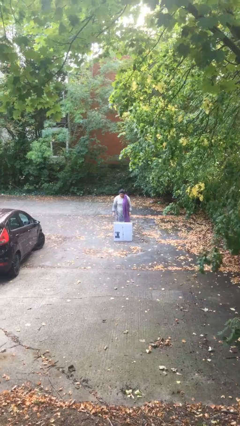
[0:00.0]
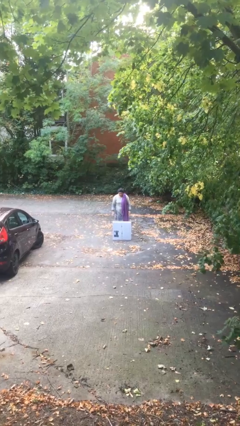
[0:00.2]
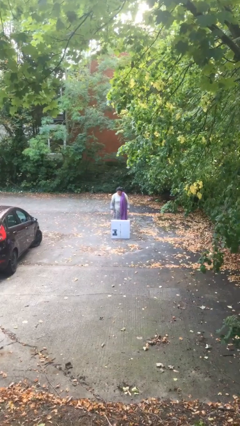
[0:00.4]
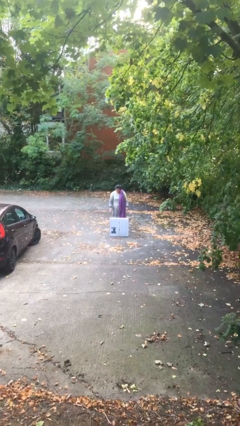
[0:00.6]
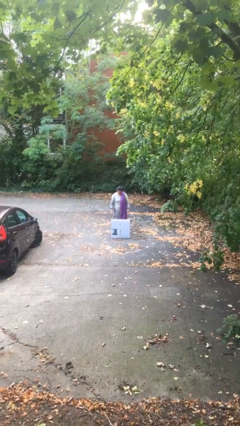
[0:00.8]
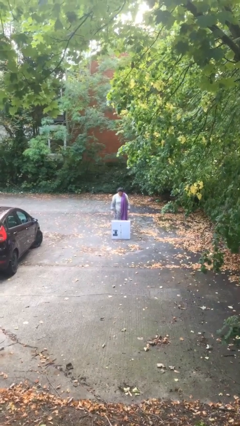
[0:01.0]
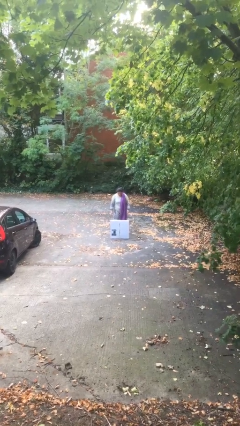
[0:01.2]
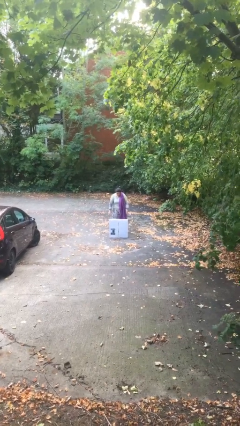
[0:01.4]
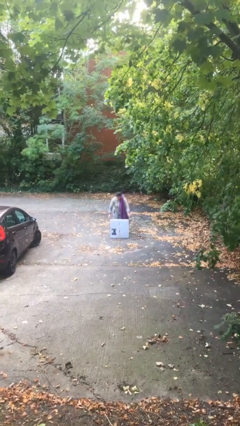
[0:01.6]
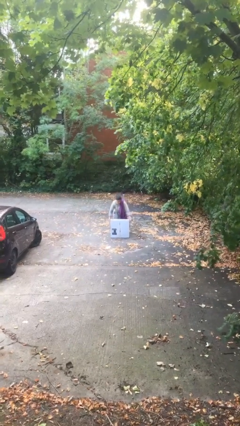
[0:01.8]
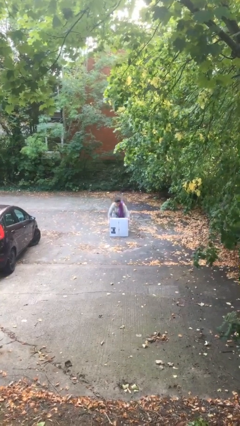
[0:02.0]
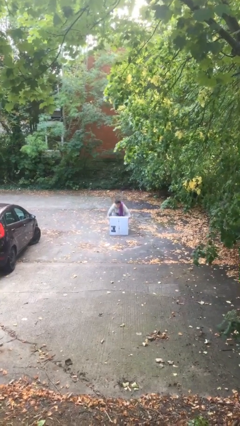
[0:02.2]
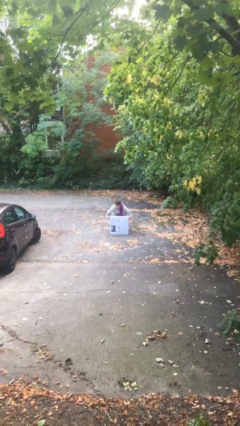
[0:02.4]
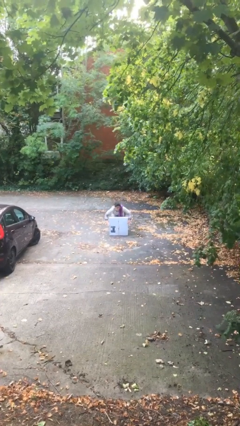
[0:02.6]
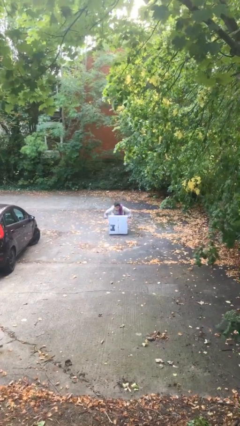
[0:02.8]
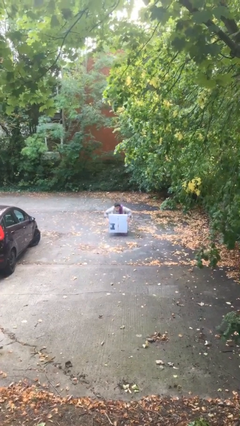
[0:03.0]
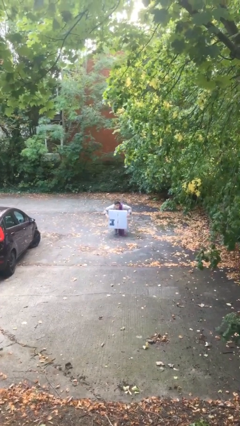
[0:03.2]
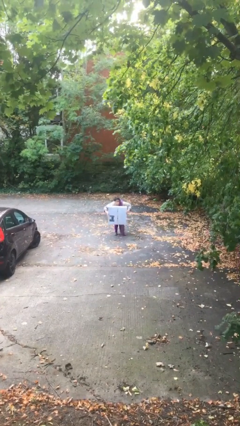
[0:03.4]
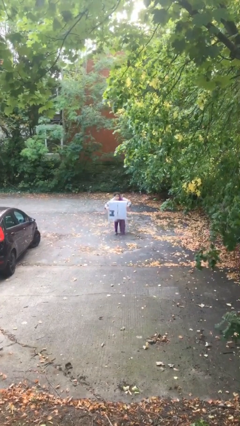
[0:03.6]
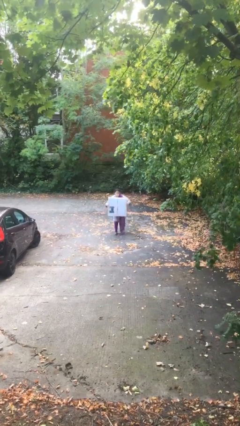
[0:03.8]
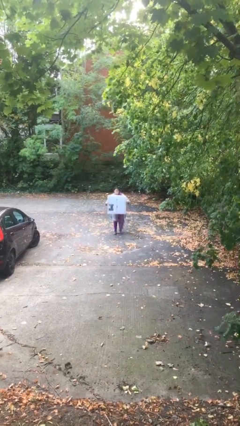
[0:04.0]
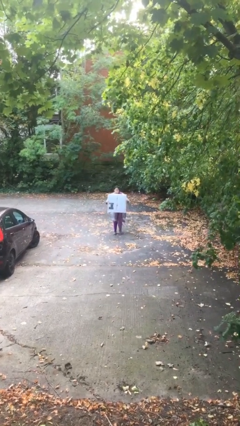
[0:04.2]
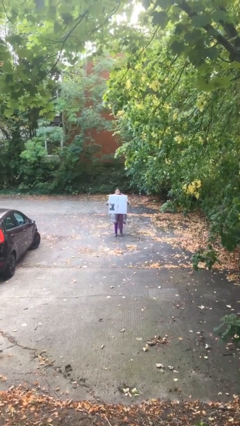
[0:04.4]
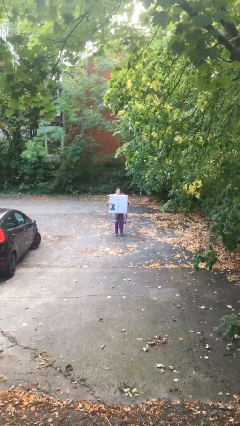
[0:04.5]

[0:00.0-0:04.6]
person picks up object from floor

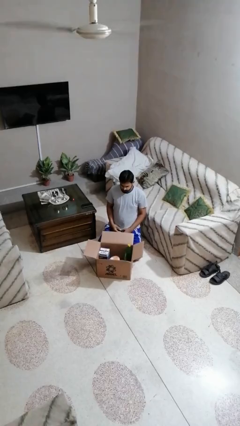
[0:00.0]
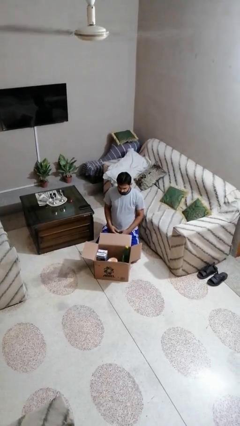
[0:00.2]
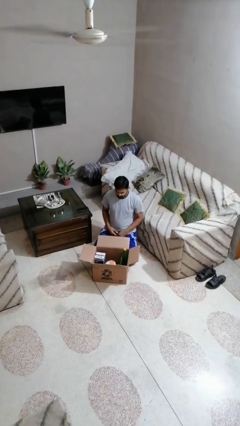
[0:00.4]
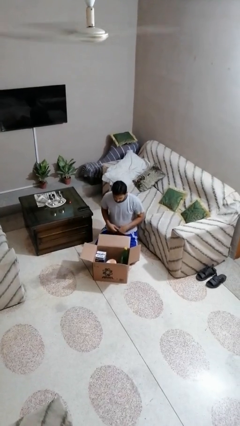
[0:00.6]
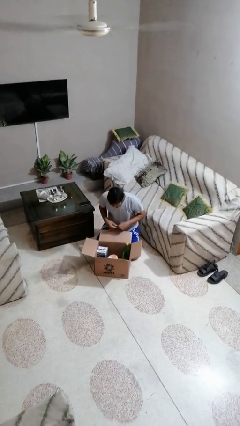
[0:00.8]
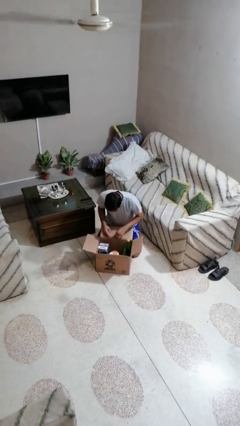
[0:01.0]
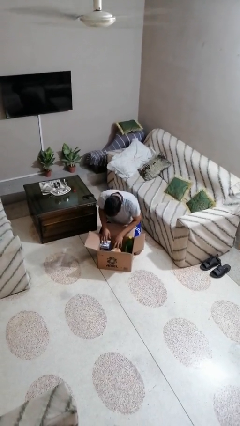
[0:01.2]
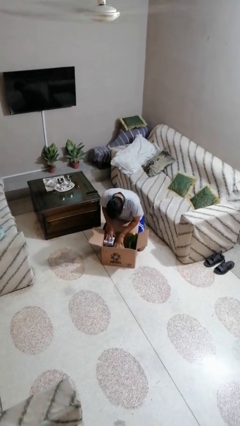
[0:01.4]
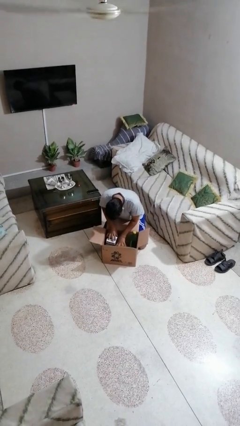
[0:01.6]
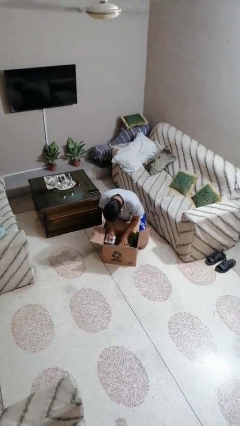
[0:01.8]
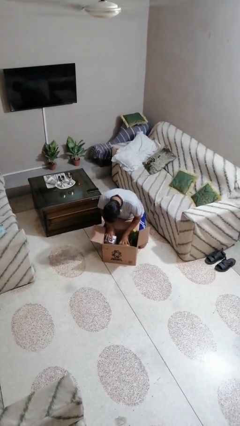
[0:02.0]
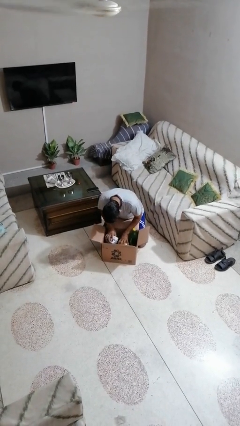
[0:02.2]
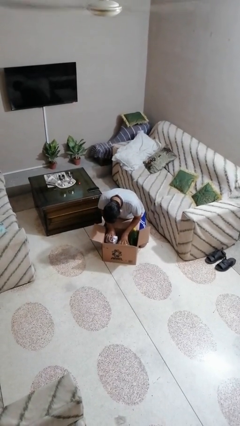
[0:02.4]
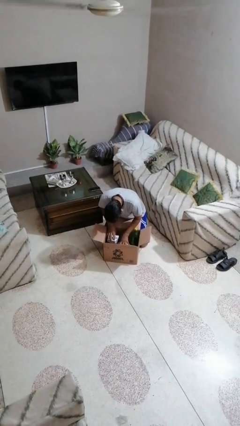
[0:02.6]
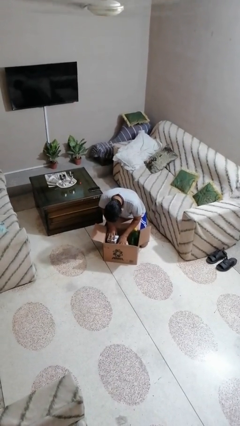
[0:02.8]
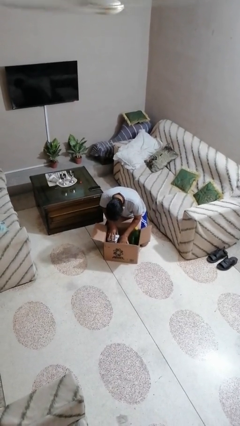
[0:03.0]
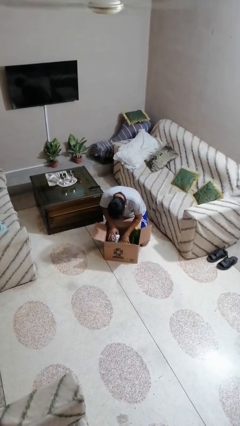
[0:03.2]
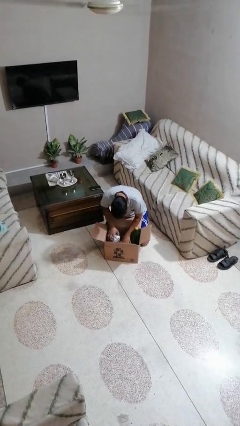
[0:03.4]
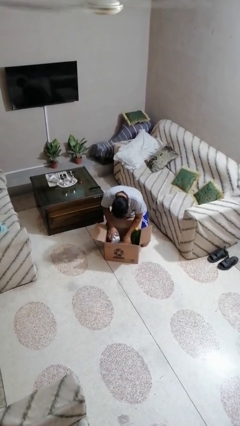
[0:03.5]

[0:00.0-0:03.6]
person searches in box

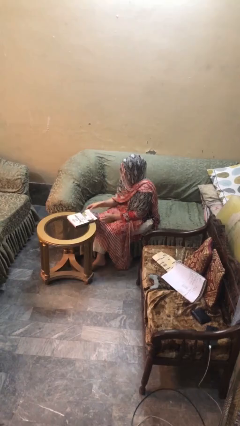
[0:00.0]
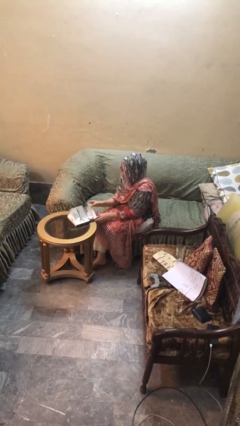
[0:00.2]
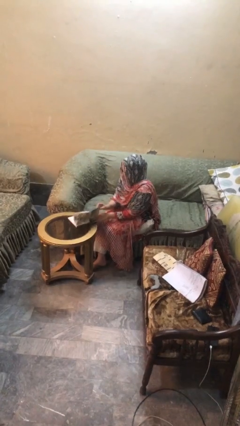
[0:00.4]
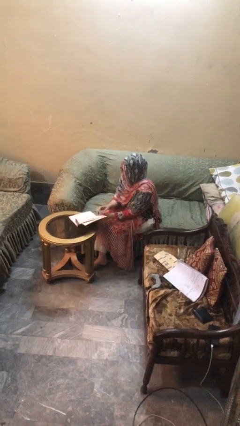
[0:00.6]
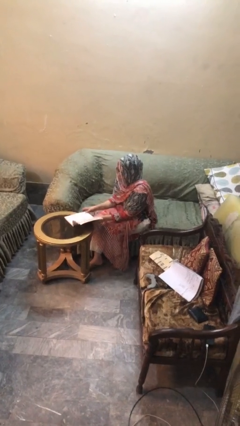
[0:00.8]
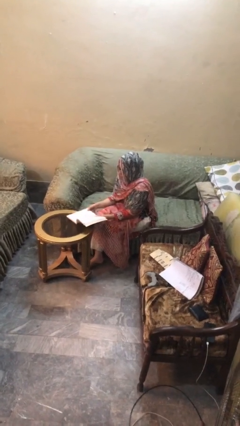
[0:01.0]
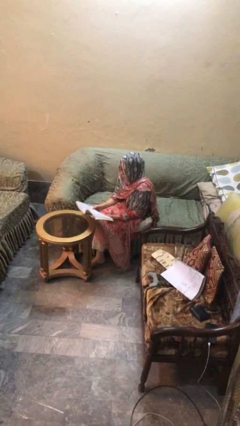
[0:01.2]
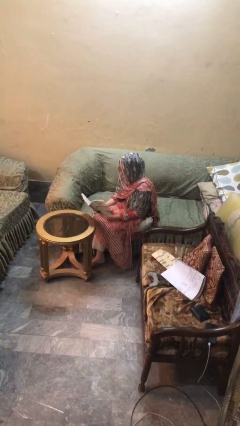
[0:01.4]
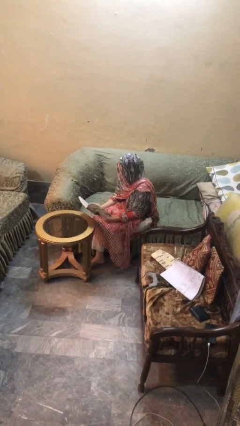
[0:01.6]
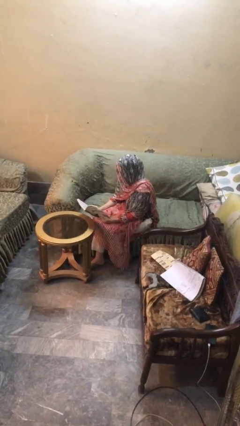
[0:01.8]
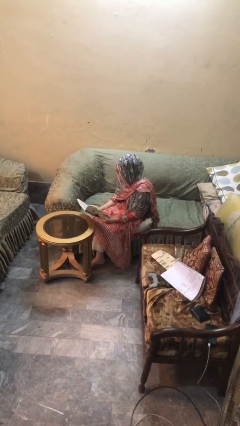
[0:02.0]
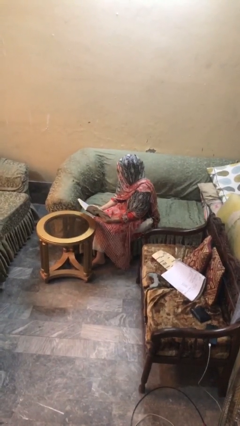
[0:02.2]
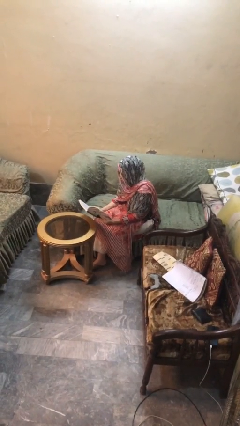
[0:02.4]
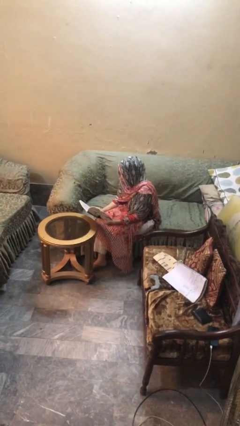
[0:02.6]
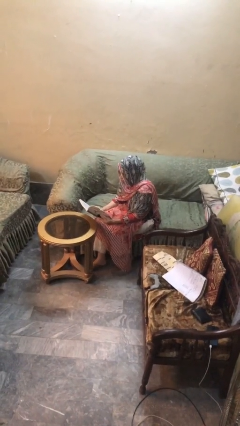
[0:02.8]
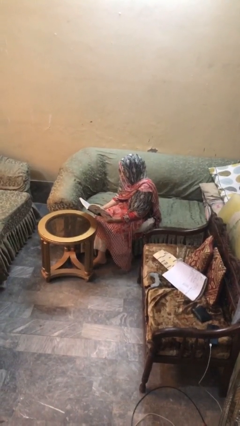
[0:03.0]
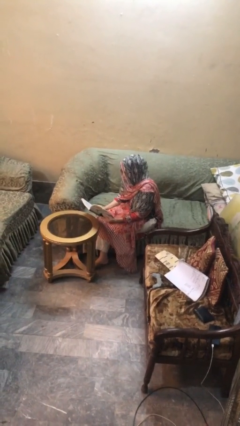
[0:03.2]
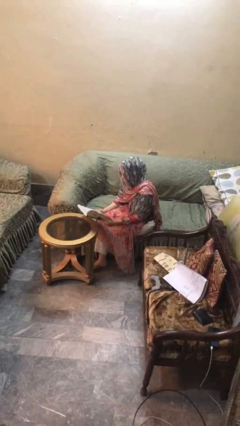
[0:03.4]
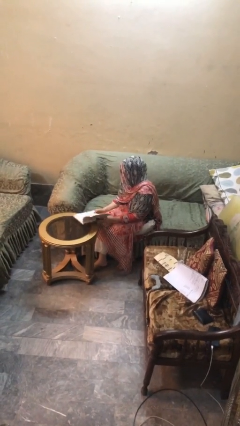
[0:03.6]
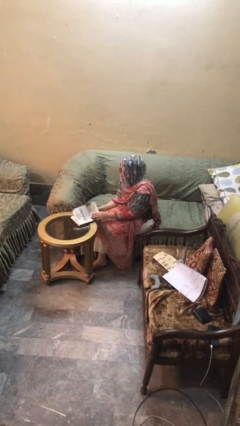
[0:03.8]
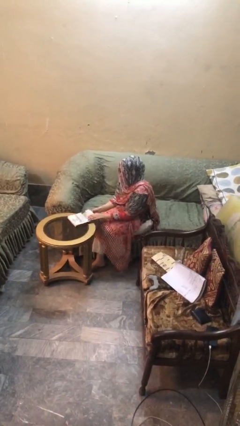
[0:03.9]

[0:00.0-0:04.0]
person reads book

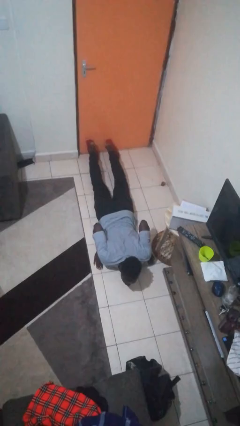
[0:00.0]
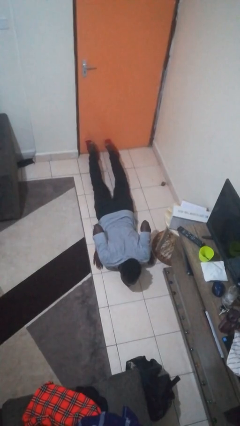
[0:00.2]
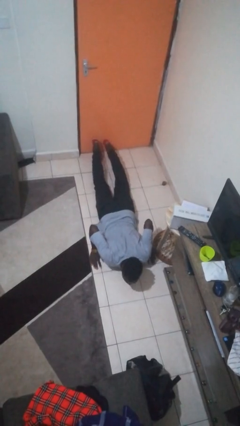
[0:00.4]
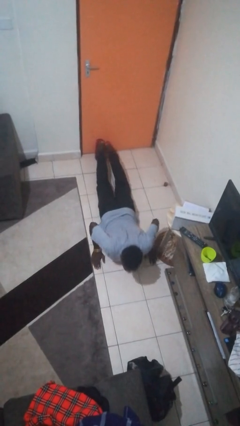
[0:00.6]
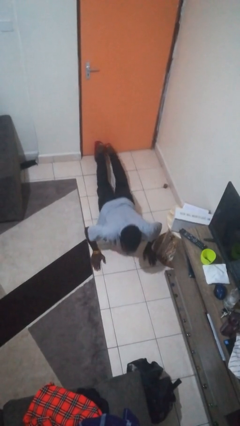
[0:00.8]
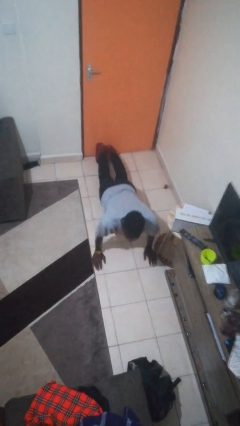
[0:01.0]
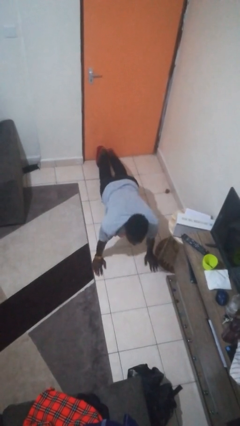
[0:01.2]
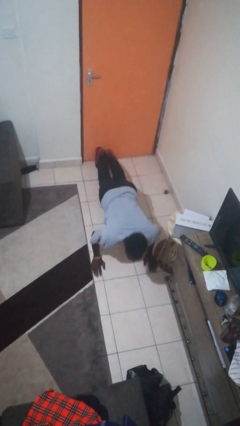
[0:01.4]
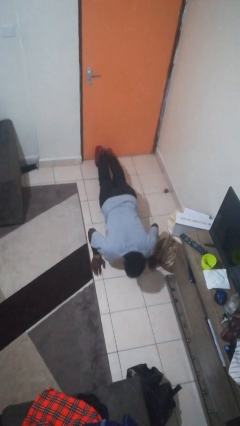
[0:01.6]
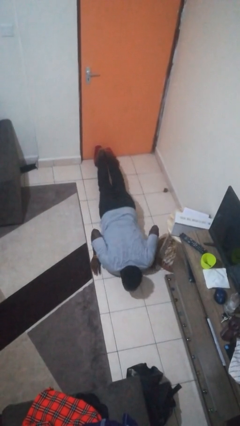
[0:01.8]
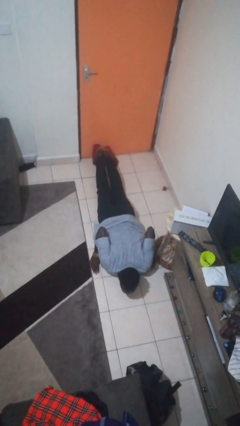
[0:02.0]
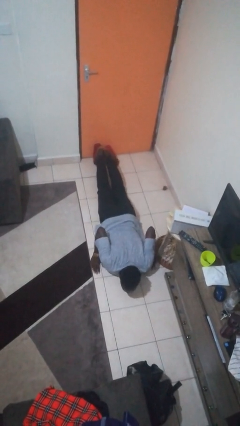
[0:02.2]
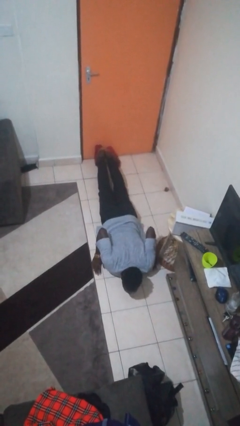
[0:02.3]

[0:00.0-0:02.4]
person exercises with pushup

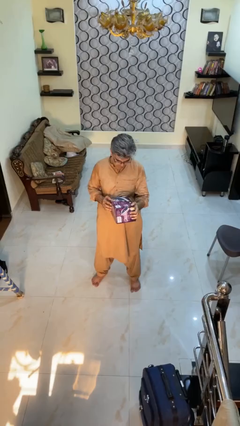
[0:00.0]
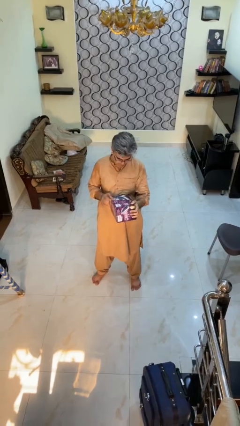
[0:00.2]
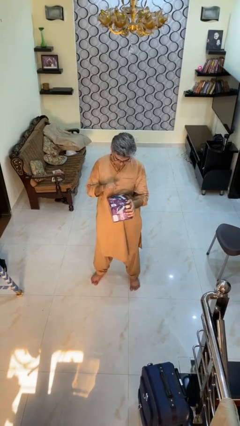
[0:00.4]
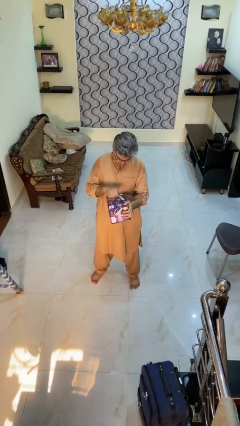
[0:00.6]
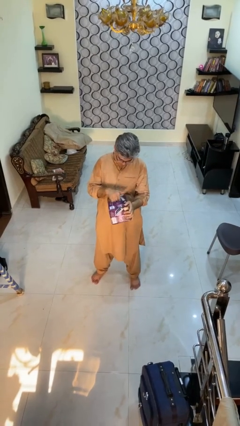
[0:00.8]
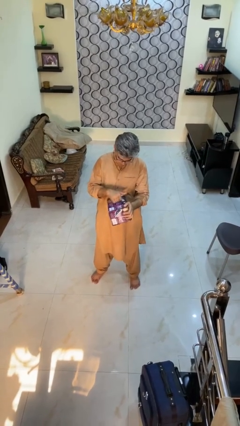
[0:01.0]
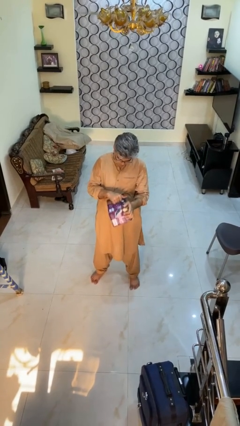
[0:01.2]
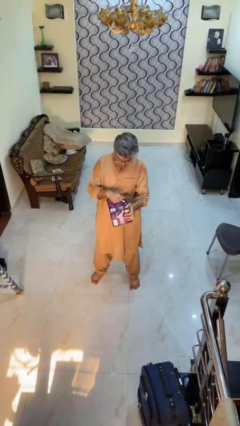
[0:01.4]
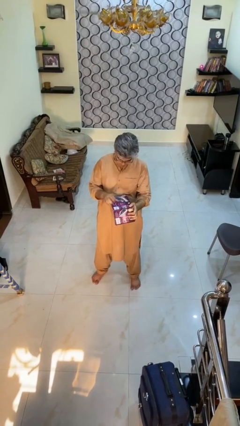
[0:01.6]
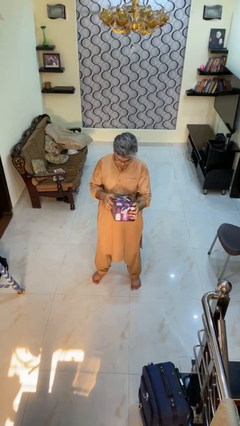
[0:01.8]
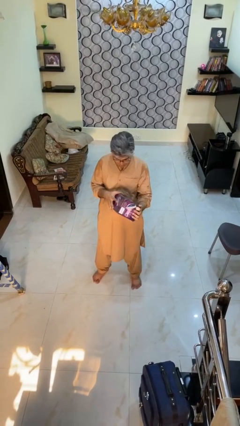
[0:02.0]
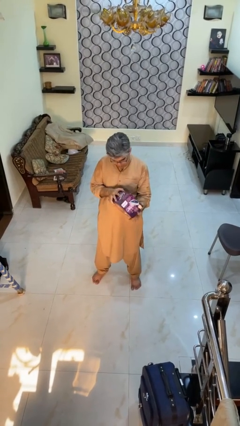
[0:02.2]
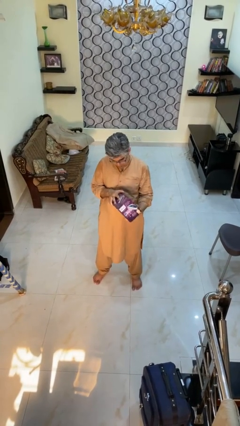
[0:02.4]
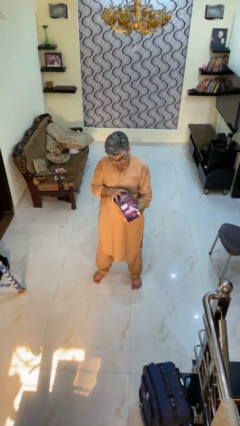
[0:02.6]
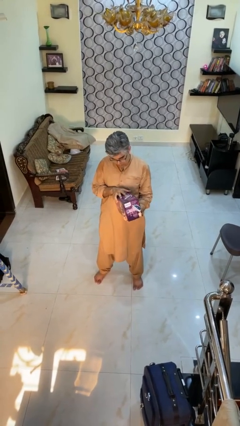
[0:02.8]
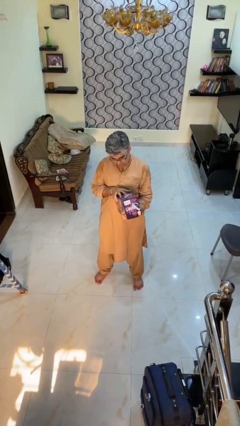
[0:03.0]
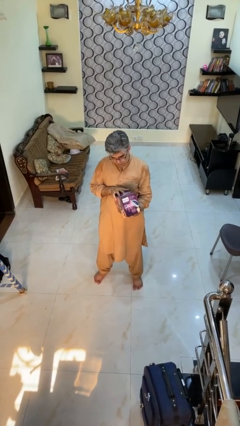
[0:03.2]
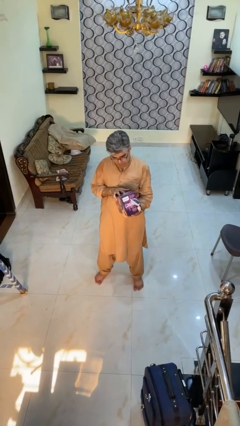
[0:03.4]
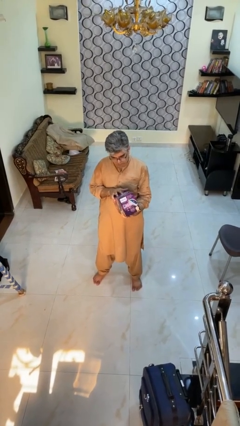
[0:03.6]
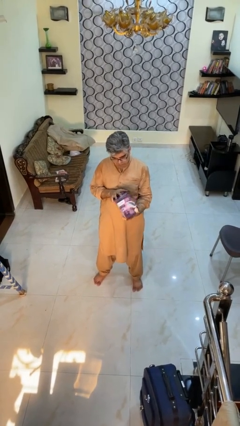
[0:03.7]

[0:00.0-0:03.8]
person taps object with finger
